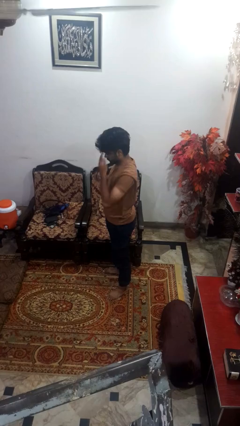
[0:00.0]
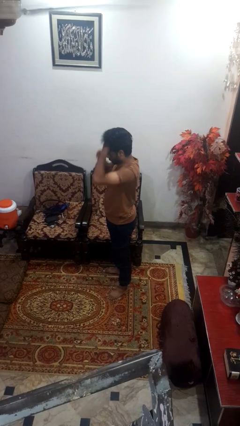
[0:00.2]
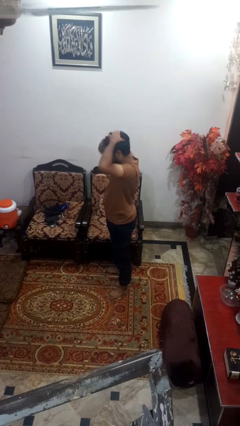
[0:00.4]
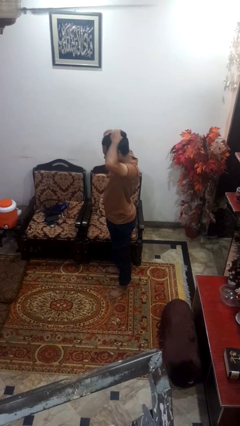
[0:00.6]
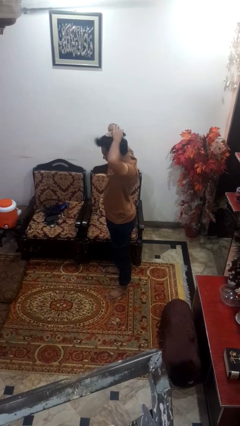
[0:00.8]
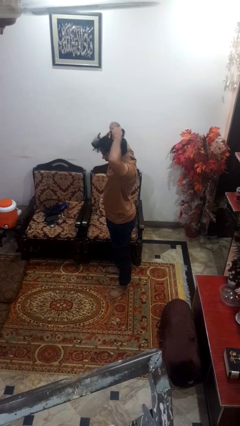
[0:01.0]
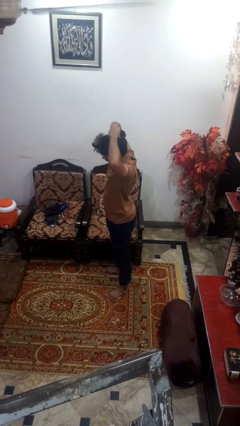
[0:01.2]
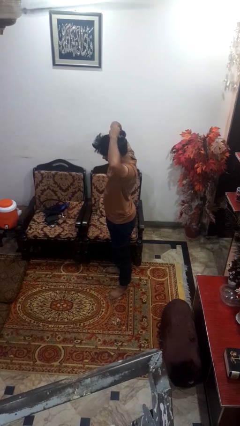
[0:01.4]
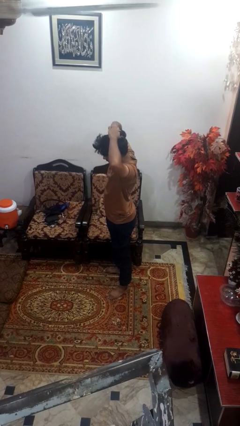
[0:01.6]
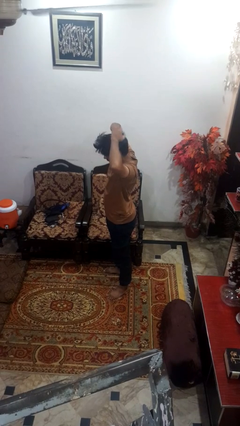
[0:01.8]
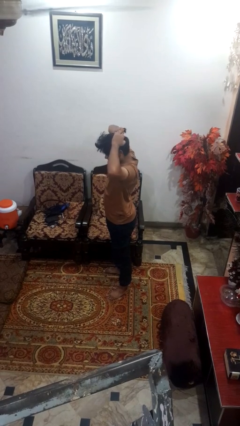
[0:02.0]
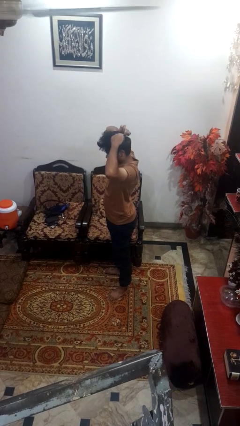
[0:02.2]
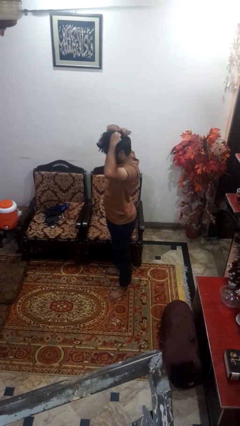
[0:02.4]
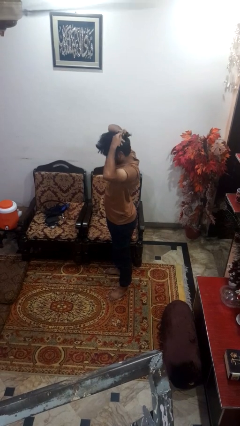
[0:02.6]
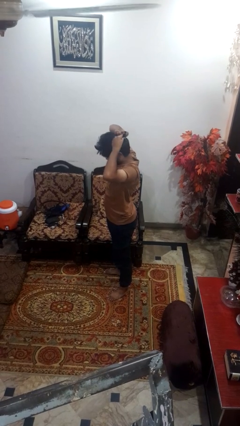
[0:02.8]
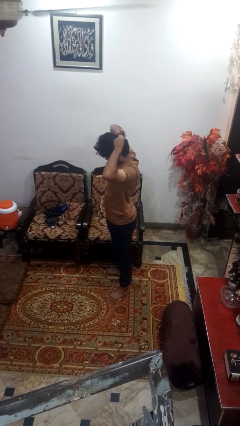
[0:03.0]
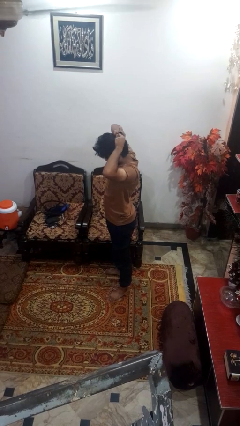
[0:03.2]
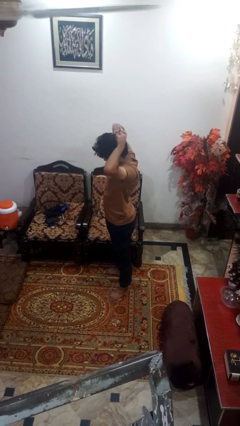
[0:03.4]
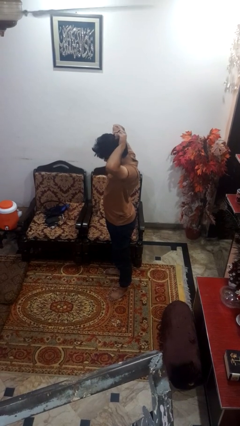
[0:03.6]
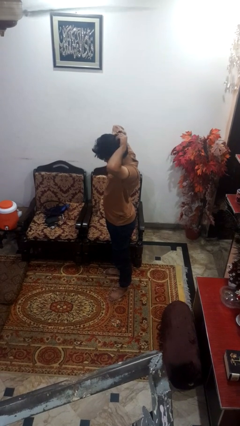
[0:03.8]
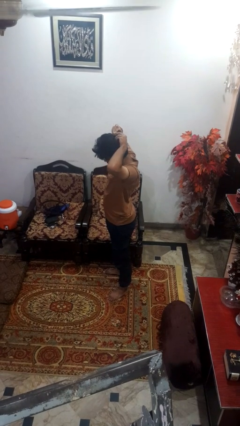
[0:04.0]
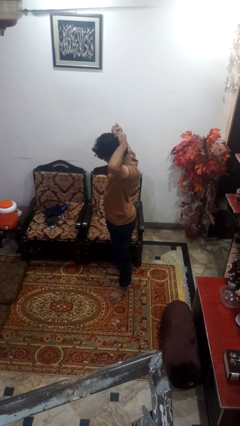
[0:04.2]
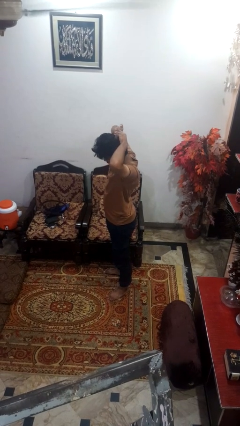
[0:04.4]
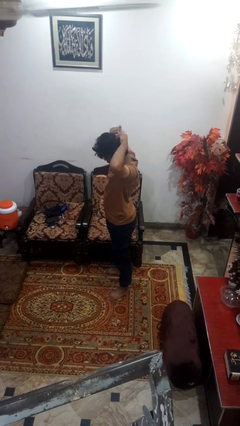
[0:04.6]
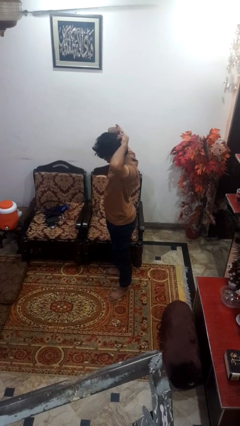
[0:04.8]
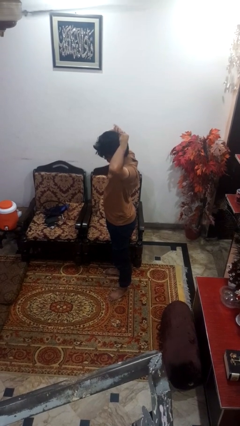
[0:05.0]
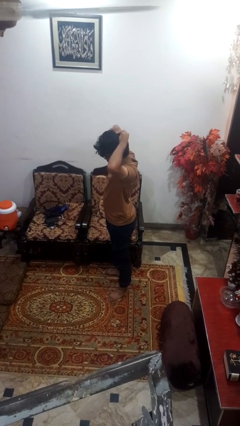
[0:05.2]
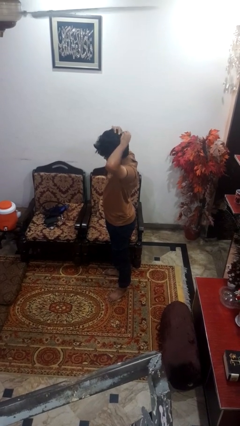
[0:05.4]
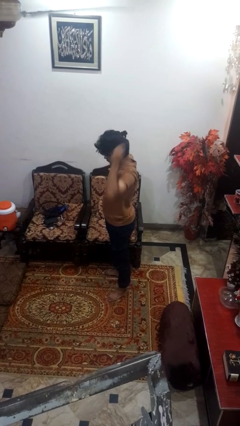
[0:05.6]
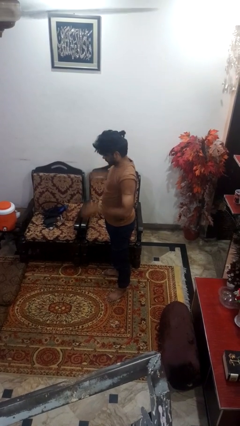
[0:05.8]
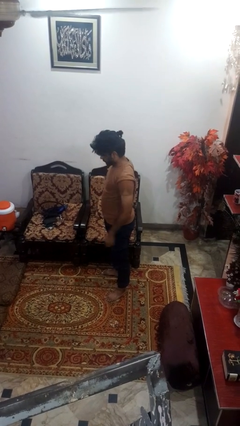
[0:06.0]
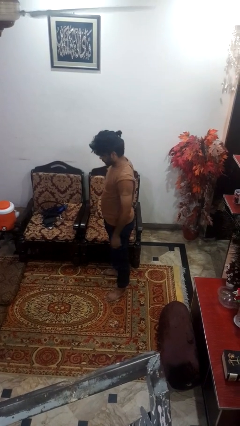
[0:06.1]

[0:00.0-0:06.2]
person puts hair in ponytail

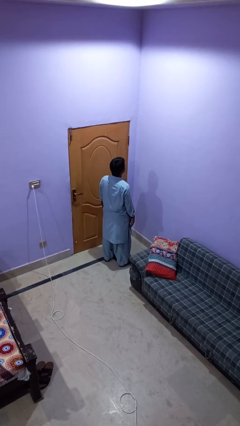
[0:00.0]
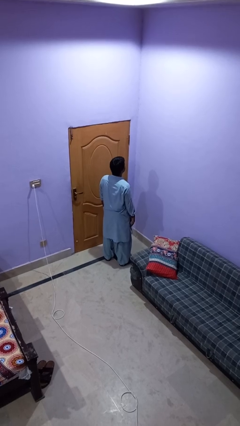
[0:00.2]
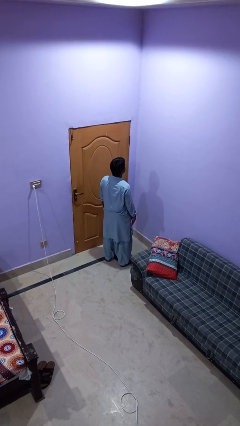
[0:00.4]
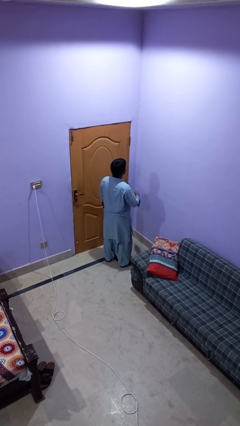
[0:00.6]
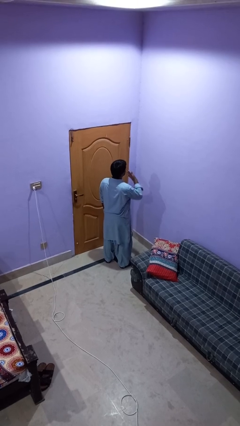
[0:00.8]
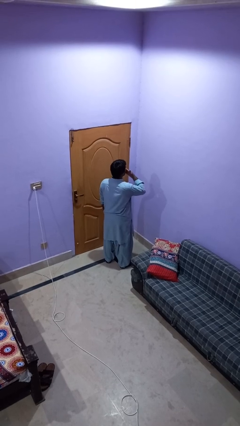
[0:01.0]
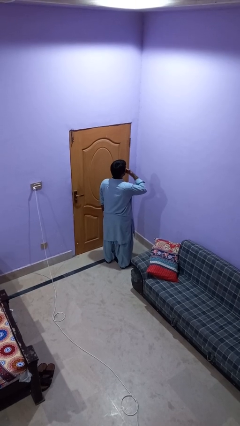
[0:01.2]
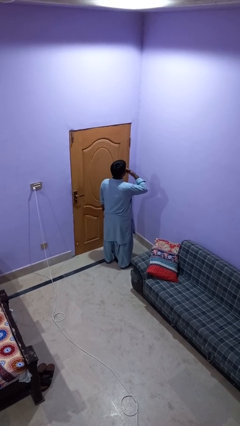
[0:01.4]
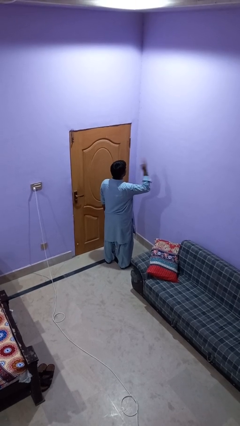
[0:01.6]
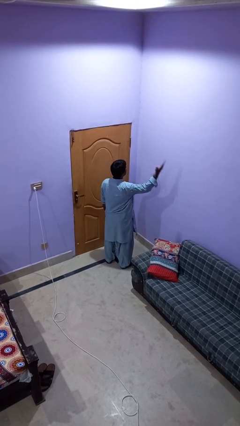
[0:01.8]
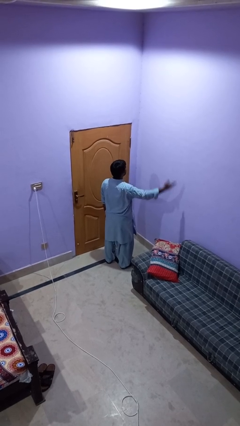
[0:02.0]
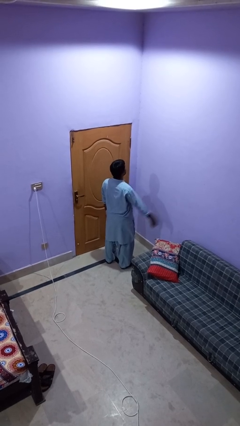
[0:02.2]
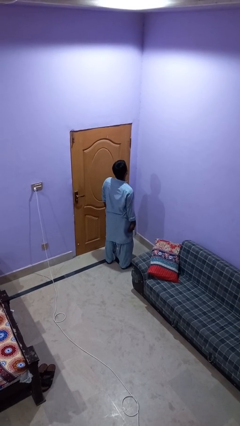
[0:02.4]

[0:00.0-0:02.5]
person gestures blow kiss

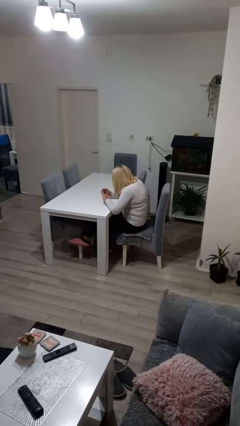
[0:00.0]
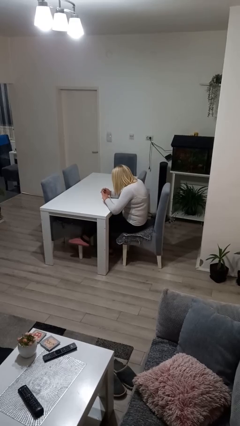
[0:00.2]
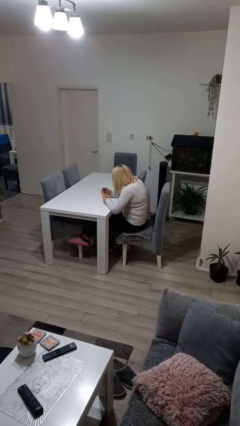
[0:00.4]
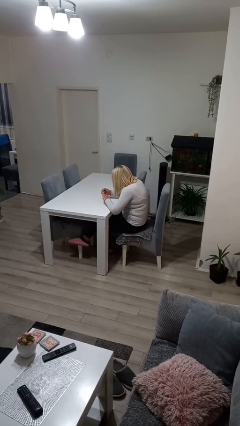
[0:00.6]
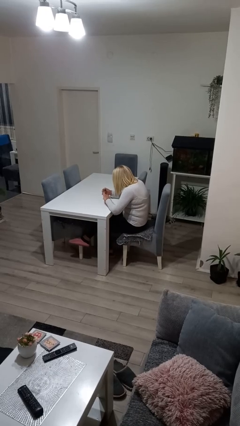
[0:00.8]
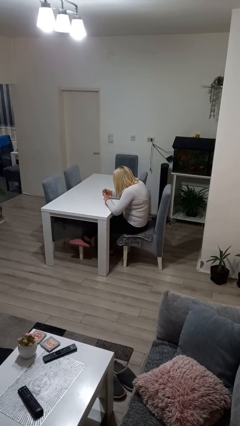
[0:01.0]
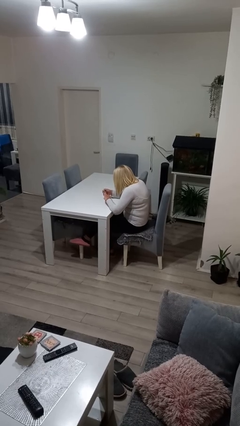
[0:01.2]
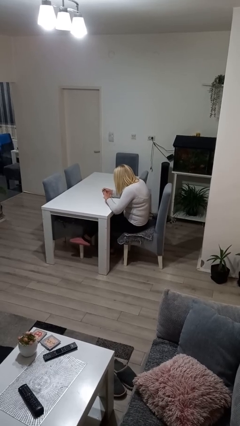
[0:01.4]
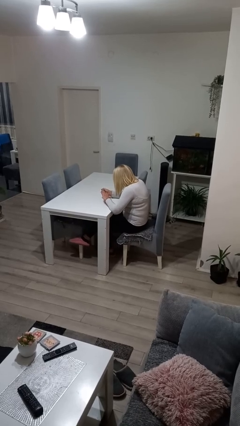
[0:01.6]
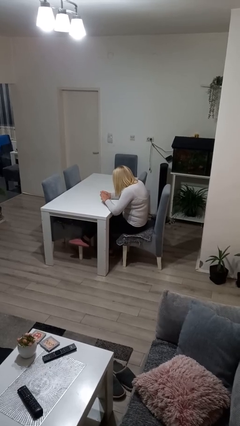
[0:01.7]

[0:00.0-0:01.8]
person clips fingernails

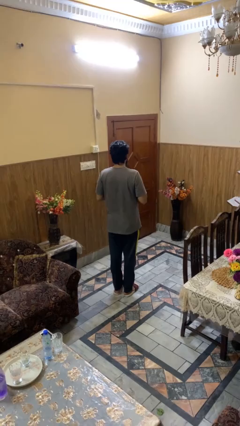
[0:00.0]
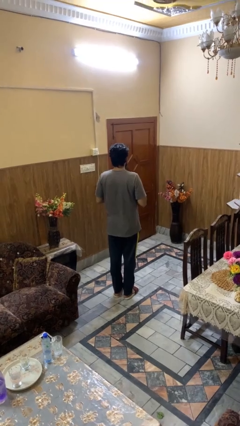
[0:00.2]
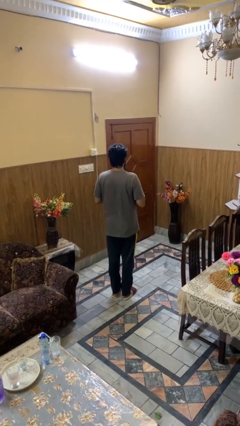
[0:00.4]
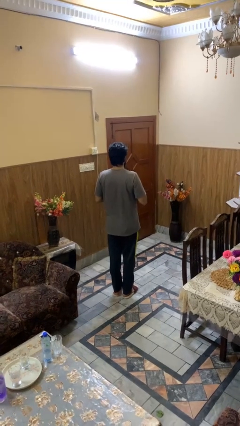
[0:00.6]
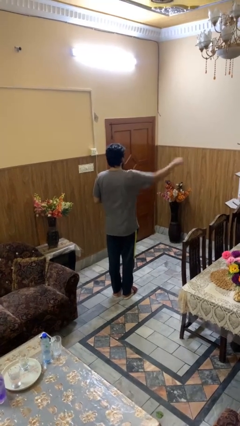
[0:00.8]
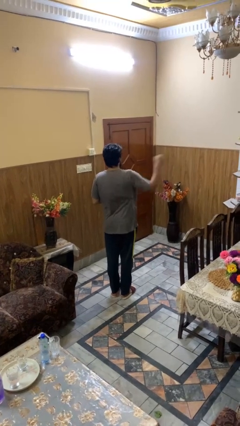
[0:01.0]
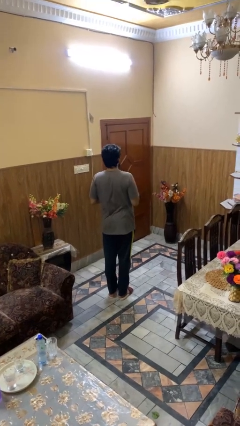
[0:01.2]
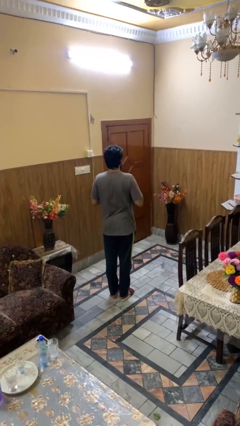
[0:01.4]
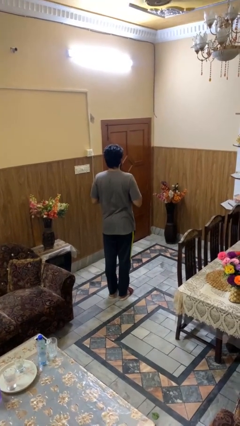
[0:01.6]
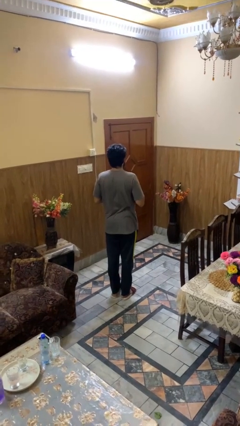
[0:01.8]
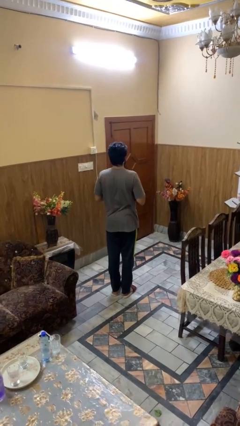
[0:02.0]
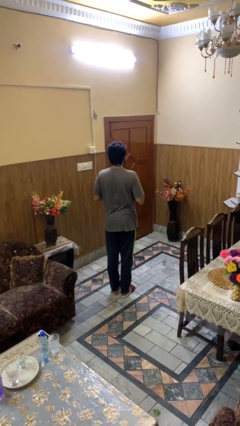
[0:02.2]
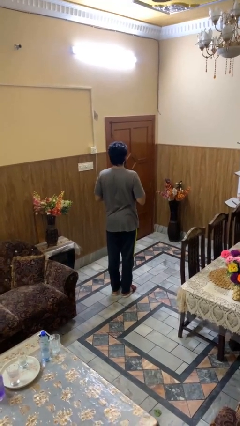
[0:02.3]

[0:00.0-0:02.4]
person punches

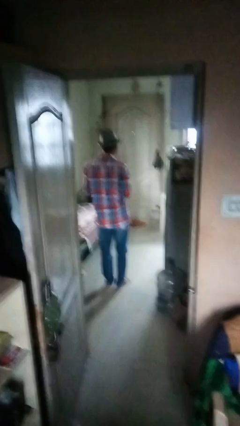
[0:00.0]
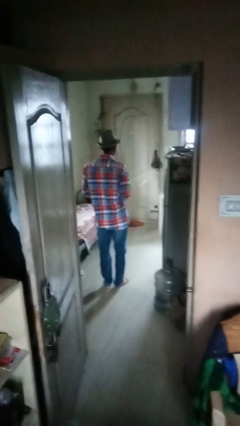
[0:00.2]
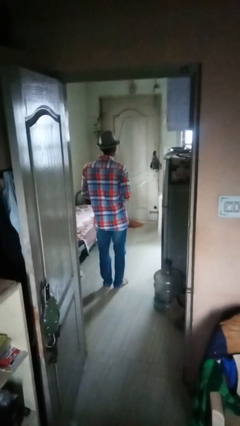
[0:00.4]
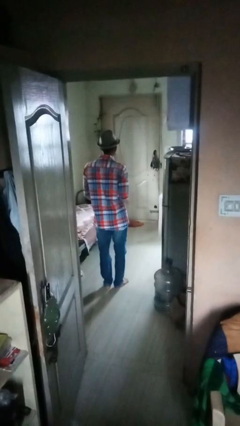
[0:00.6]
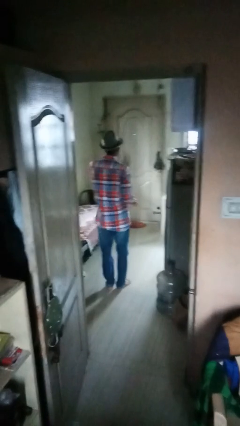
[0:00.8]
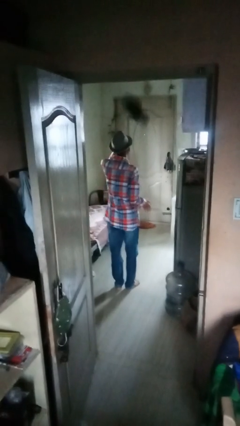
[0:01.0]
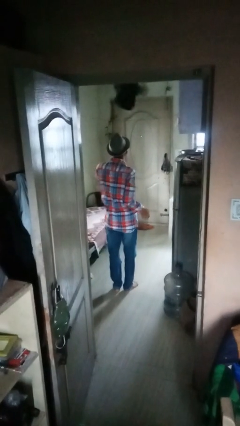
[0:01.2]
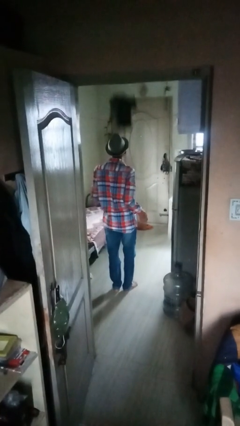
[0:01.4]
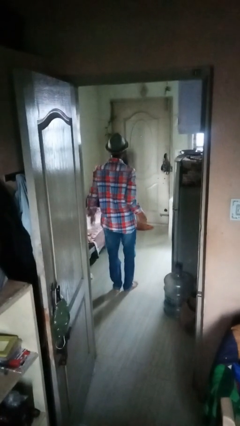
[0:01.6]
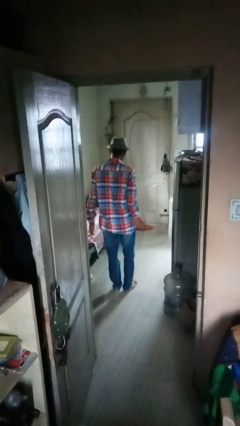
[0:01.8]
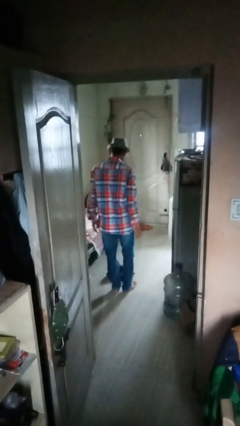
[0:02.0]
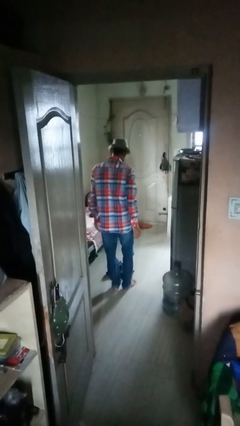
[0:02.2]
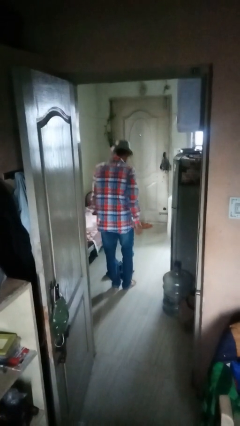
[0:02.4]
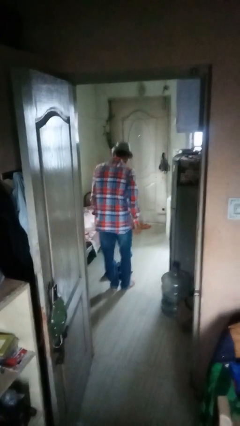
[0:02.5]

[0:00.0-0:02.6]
person throws object into air

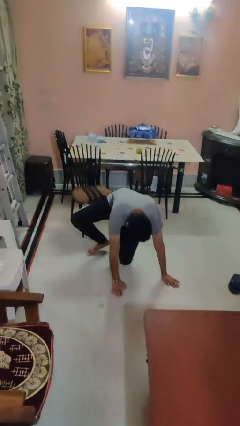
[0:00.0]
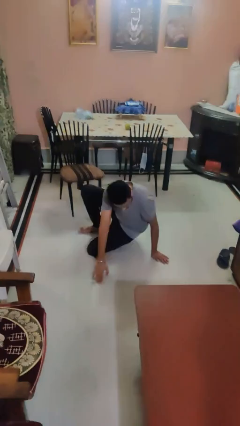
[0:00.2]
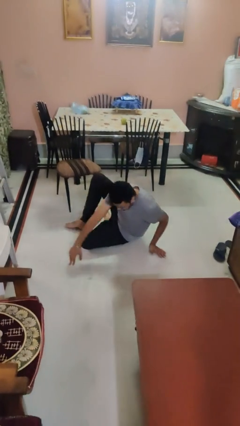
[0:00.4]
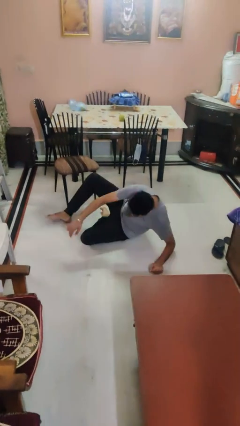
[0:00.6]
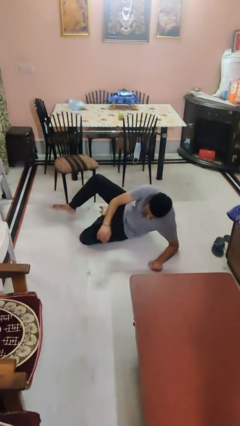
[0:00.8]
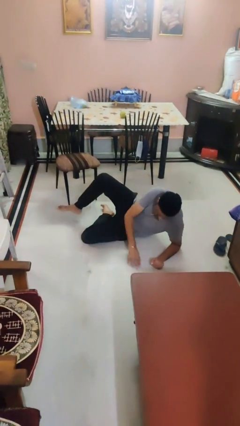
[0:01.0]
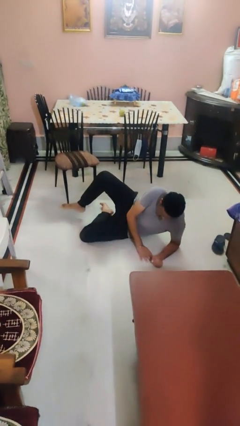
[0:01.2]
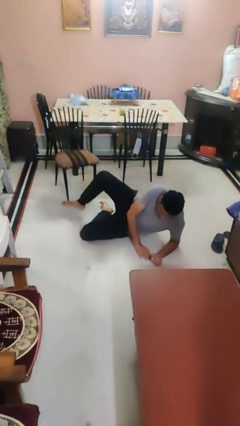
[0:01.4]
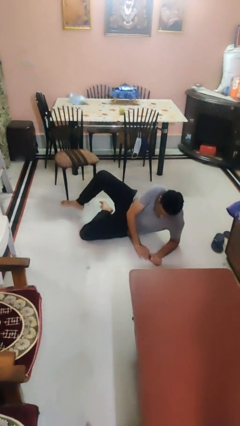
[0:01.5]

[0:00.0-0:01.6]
person falls while standing

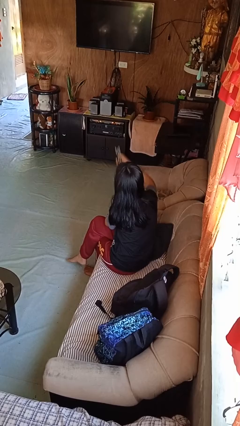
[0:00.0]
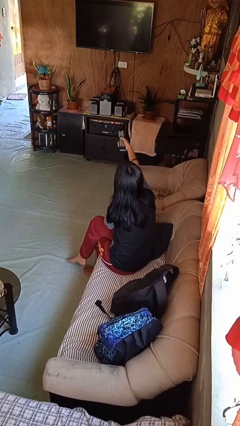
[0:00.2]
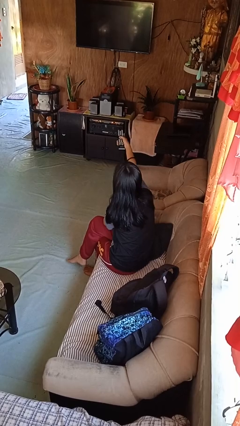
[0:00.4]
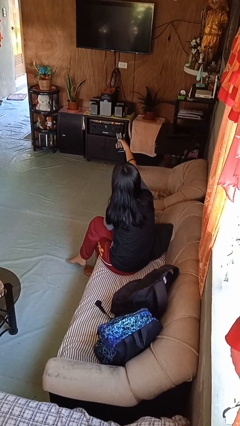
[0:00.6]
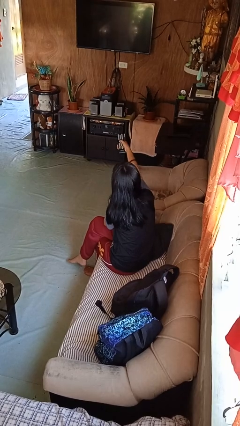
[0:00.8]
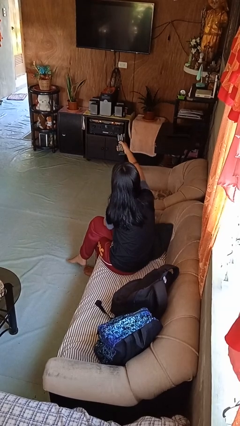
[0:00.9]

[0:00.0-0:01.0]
person uses television remote
